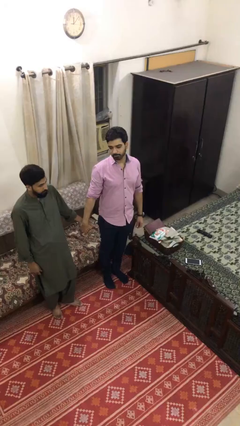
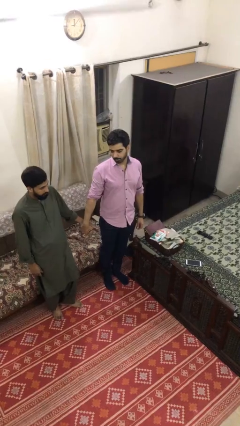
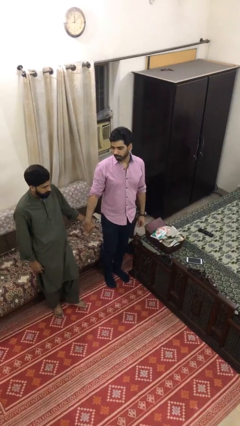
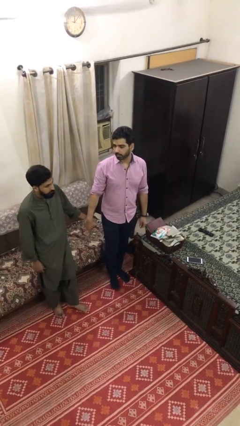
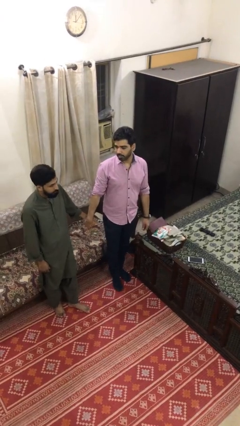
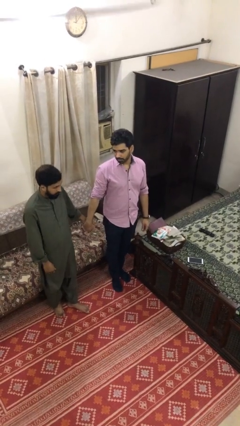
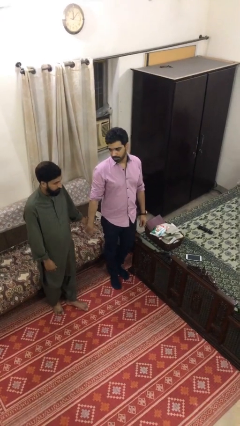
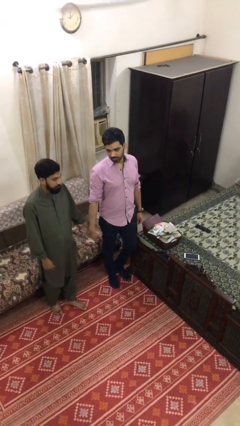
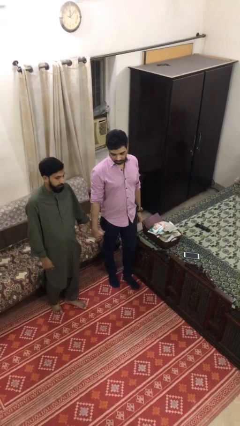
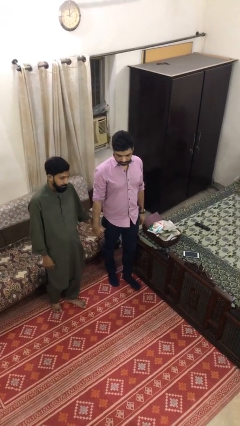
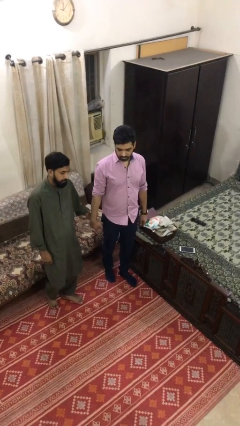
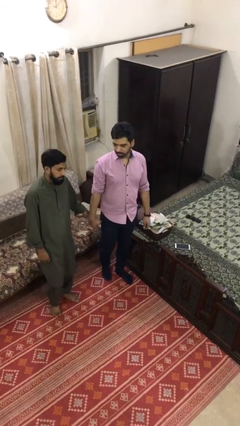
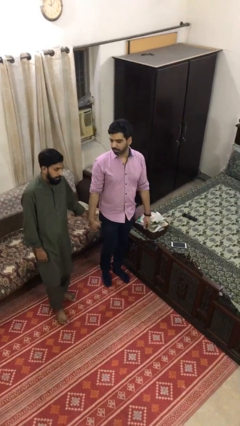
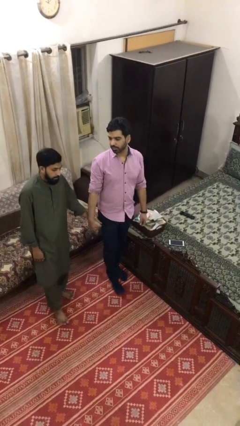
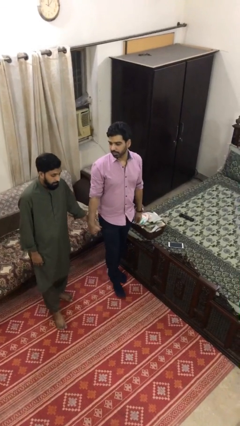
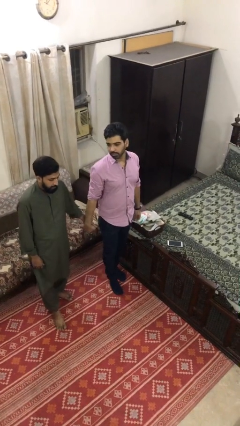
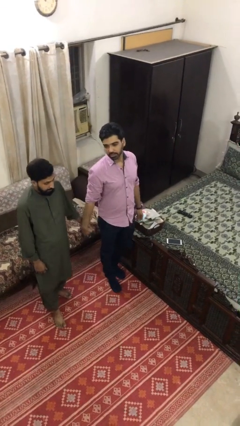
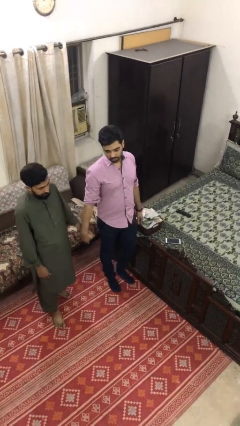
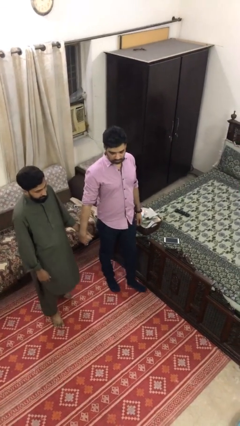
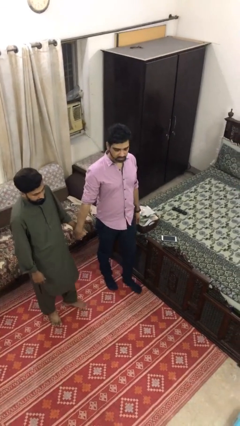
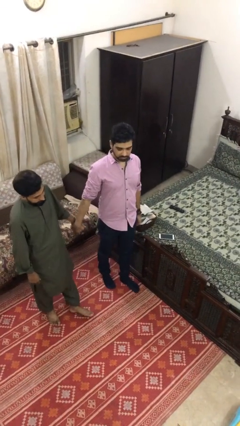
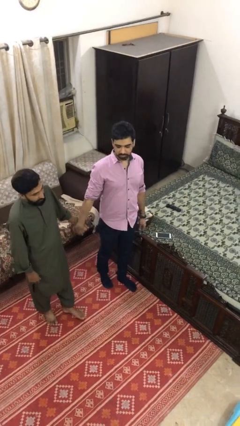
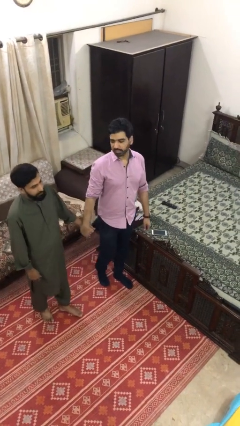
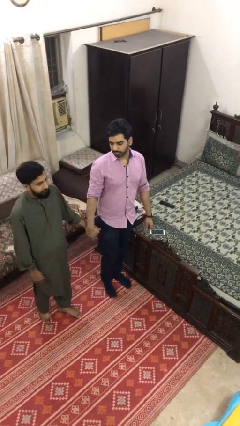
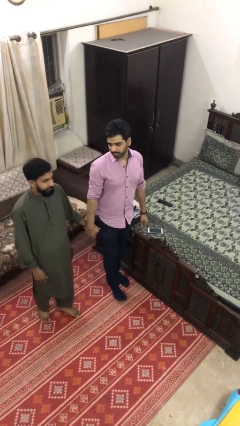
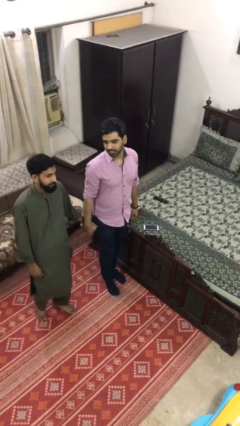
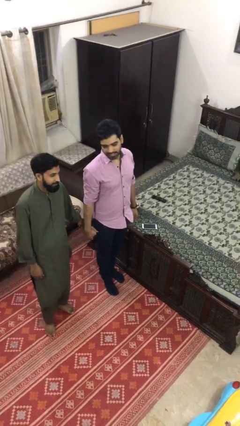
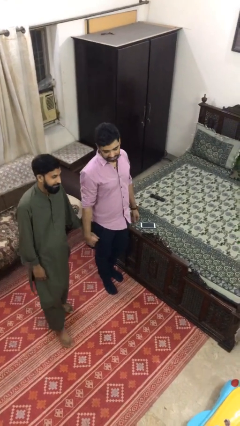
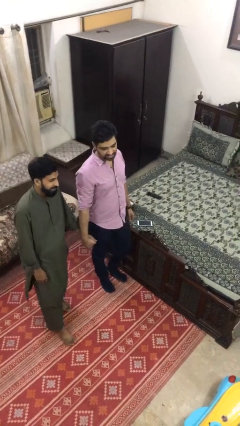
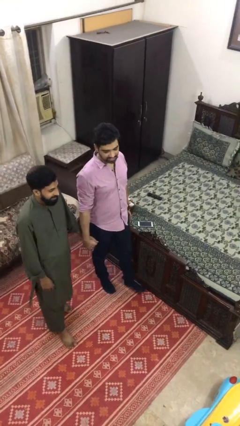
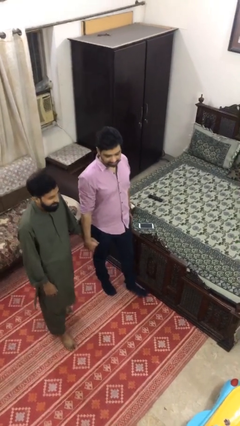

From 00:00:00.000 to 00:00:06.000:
person holds hand

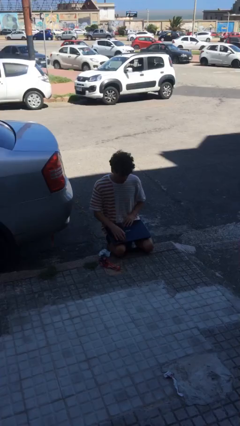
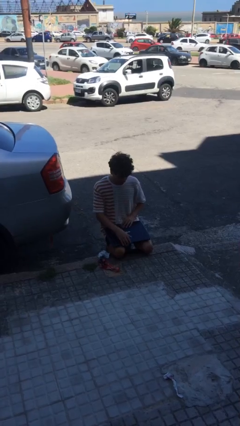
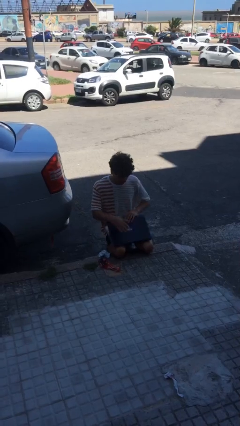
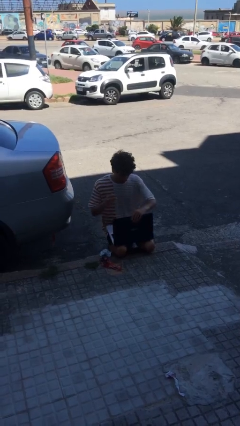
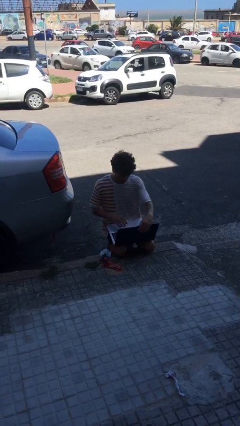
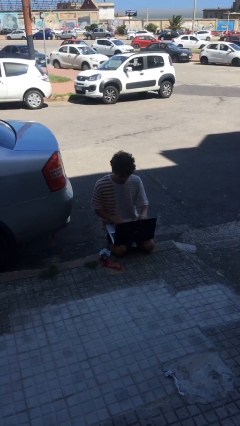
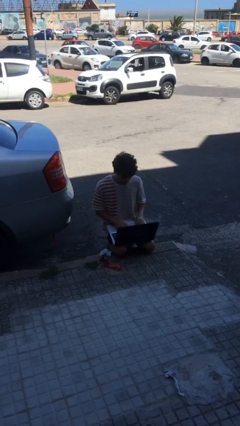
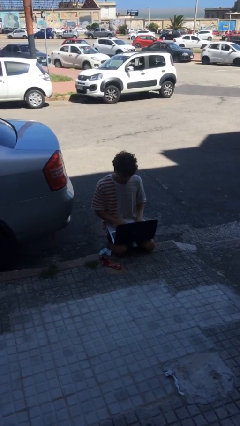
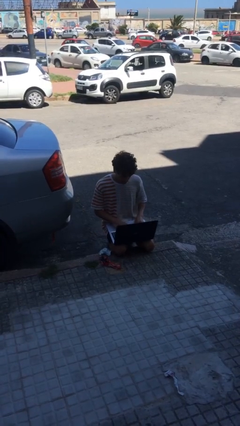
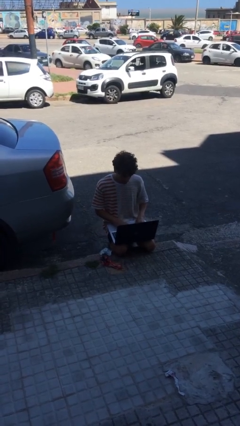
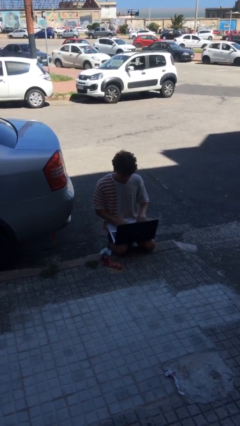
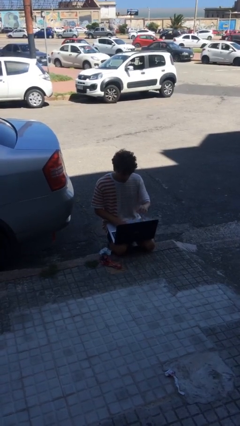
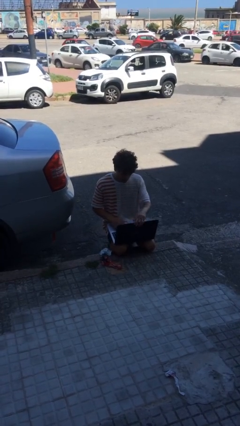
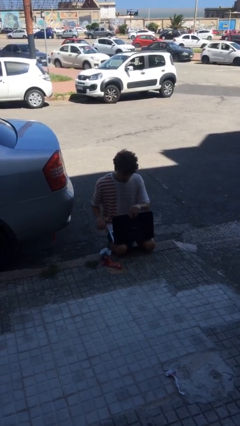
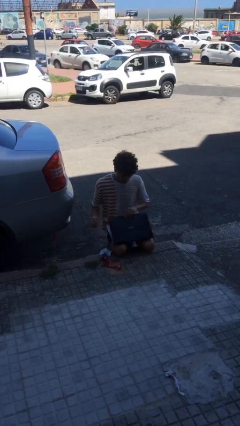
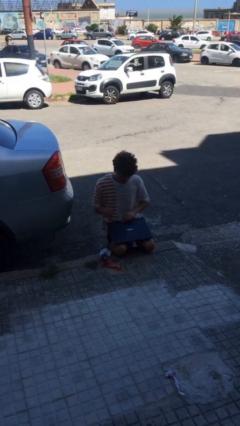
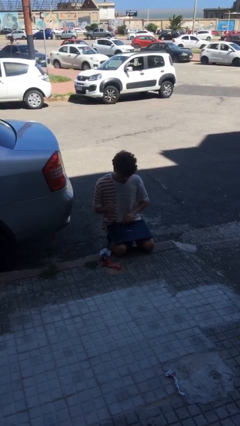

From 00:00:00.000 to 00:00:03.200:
person interacts with laptop

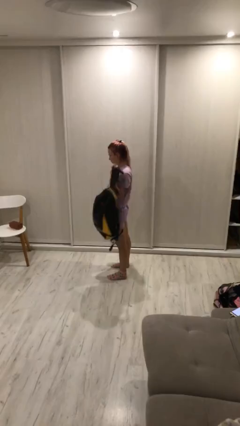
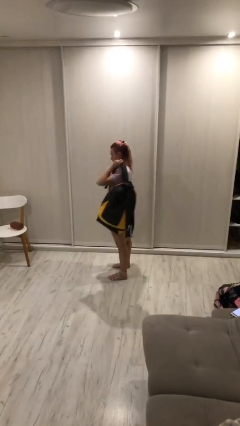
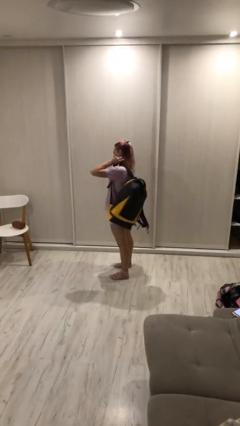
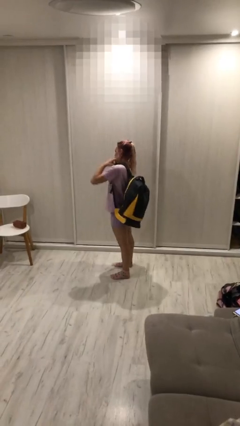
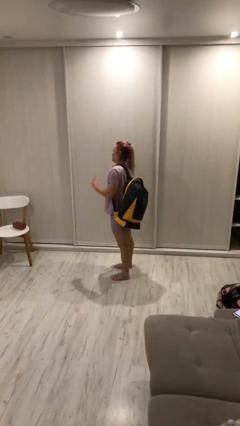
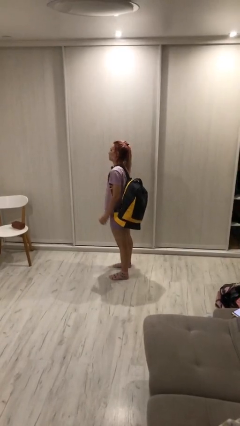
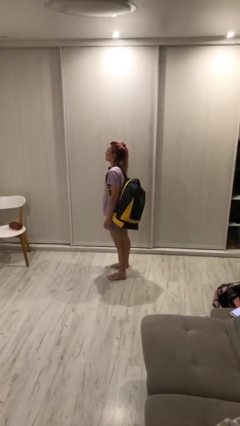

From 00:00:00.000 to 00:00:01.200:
person puts on backpack

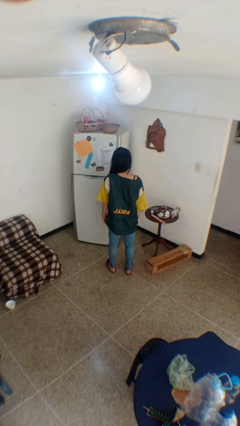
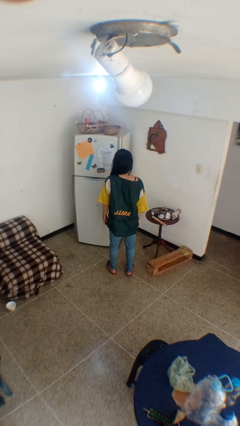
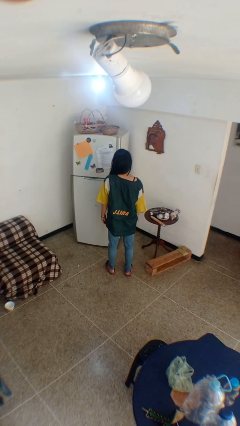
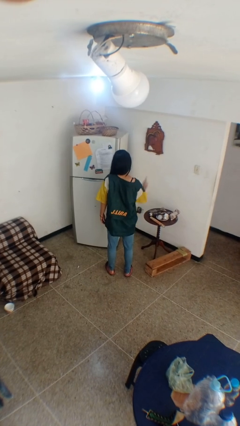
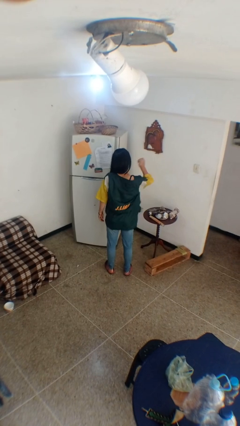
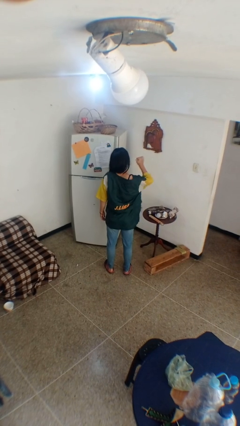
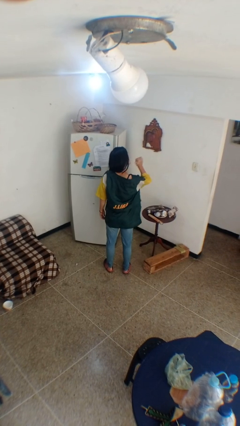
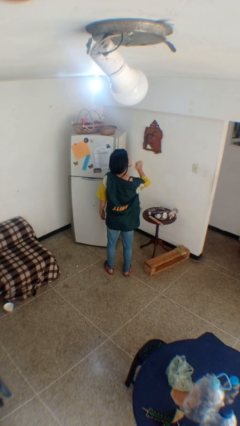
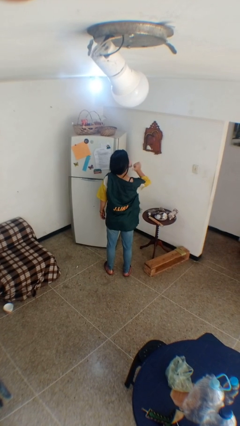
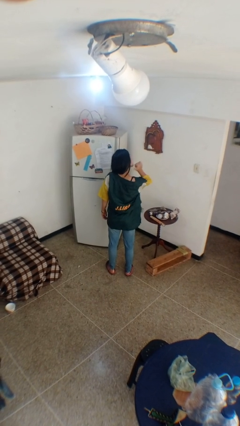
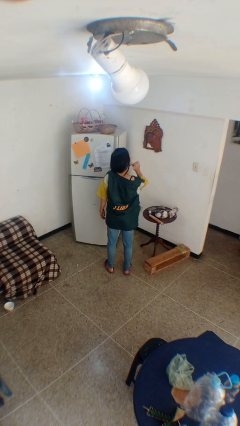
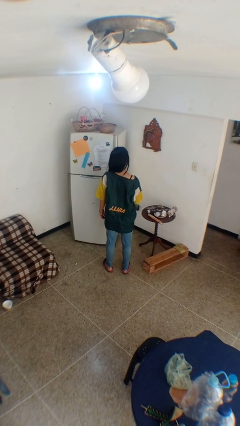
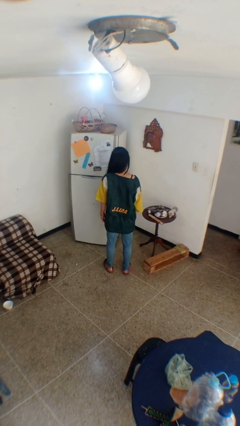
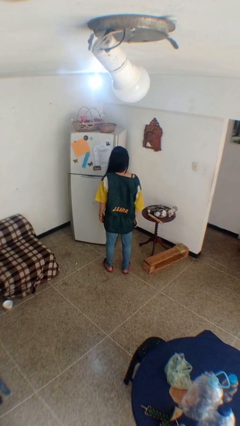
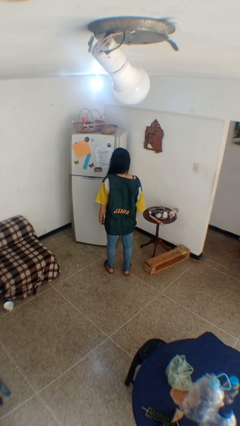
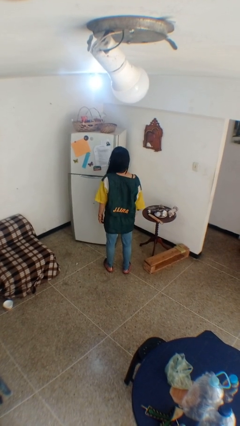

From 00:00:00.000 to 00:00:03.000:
person gestures behind me

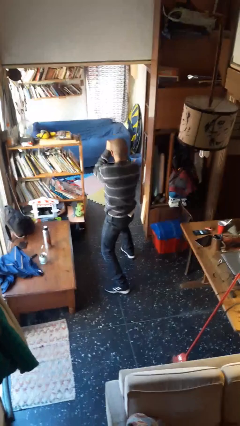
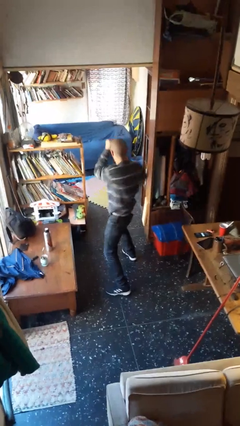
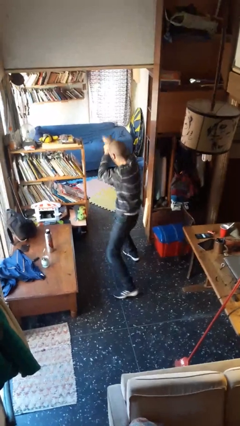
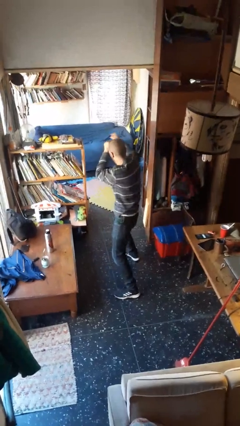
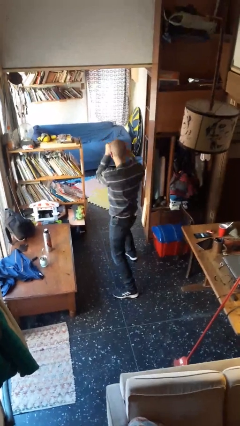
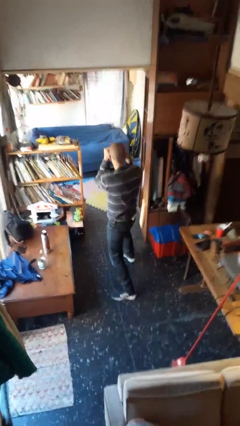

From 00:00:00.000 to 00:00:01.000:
person punches

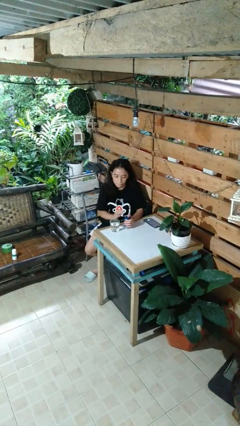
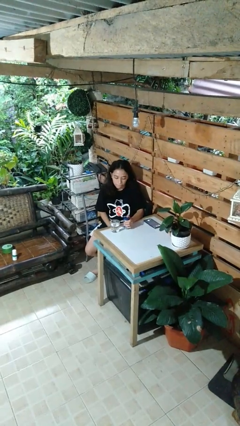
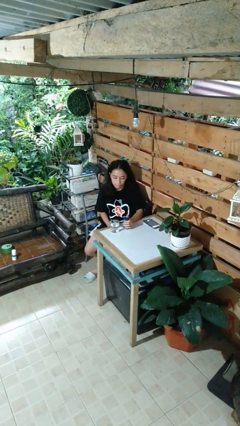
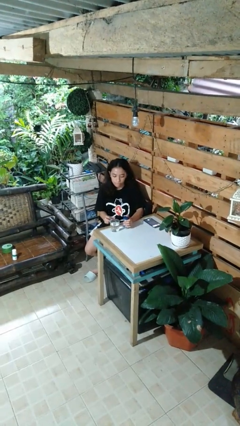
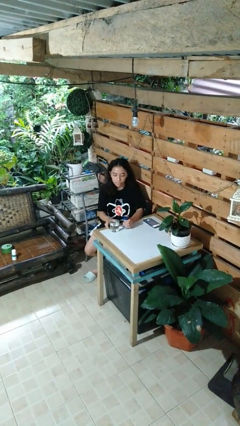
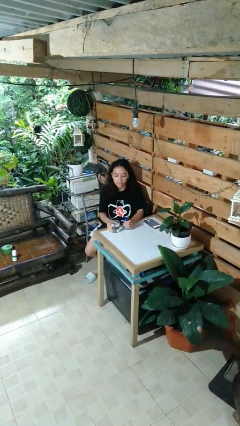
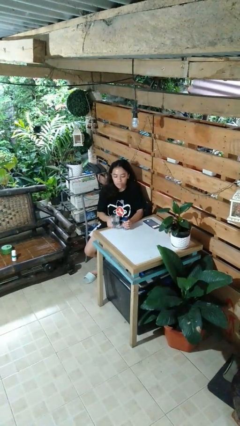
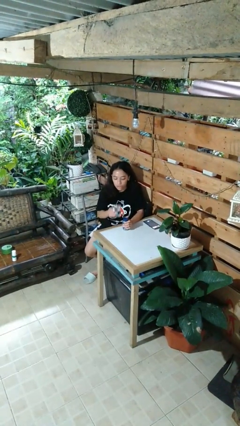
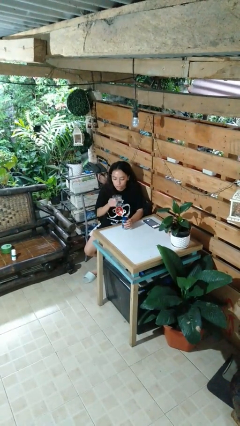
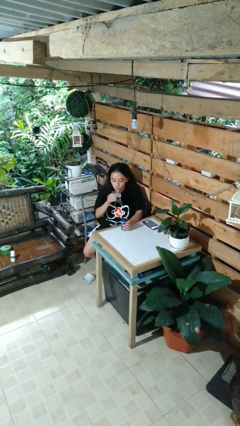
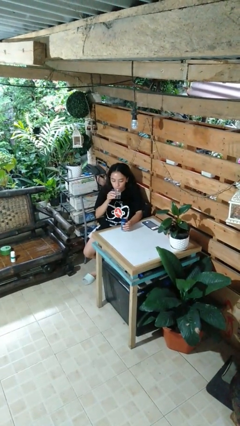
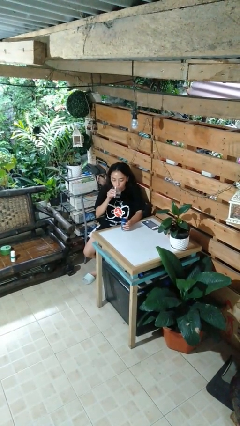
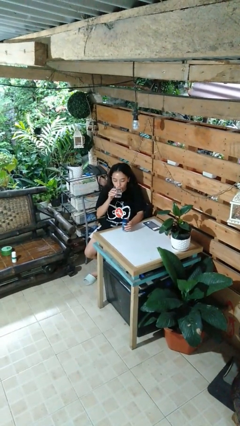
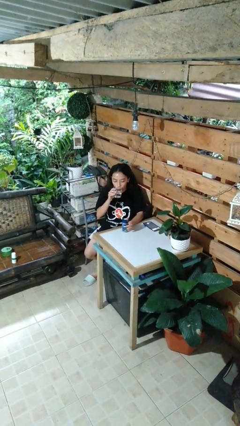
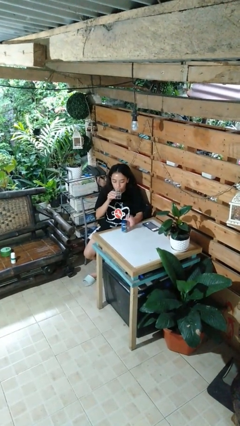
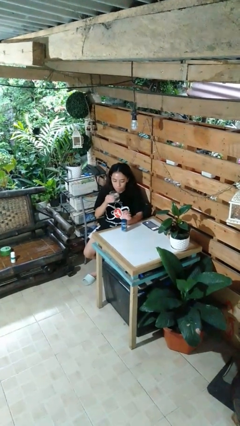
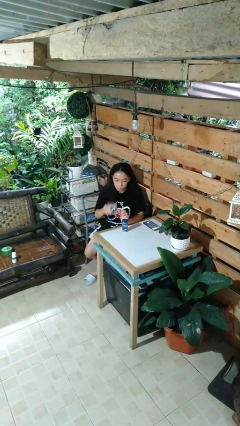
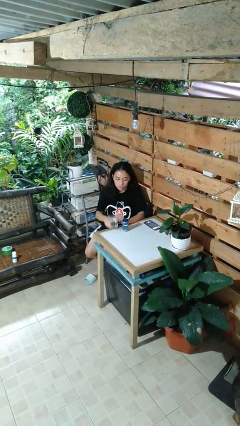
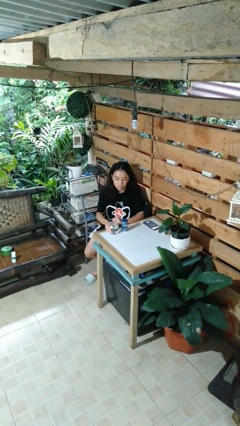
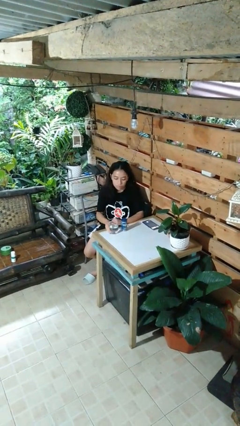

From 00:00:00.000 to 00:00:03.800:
person drinks from cup
